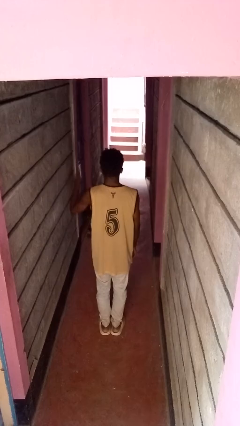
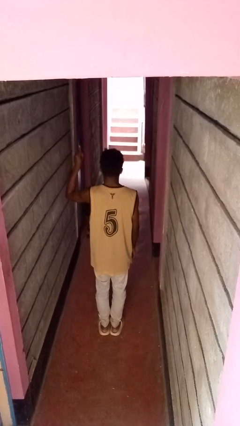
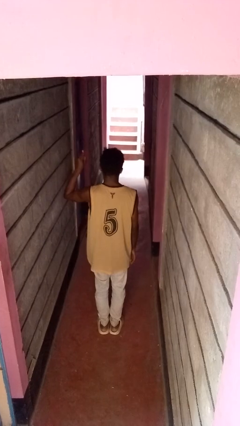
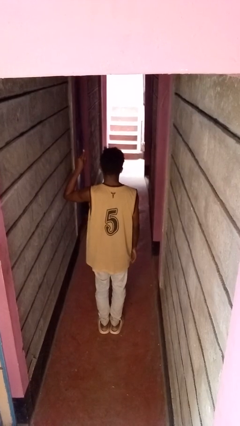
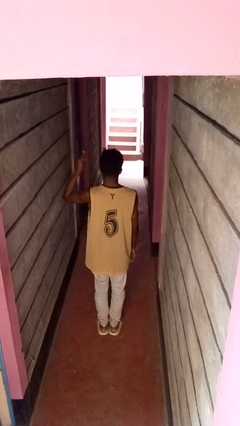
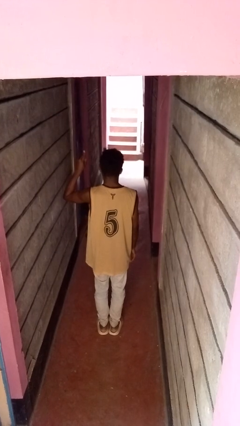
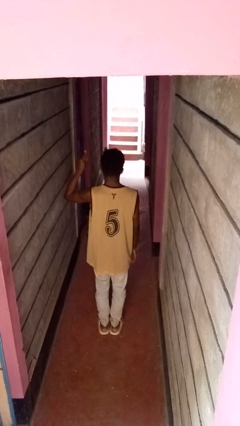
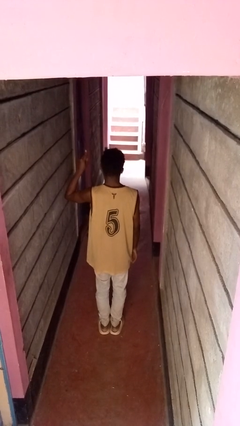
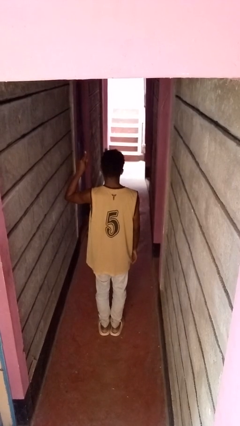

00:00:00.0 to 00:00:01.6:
person gestures number one

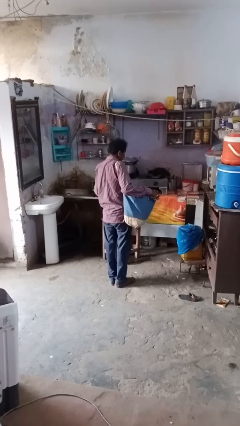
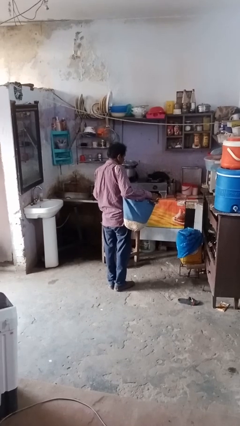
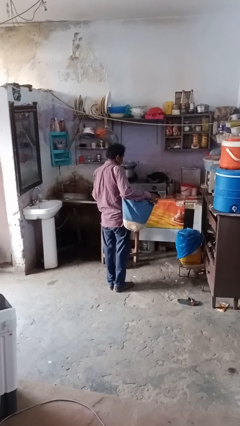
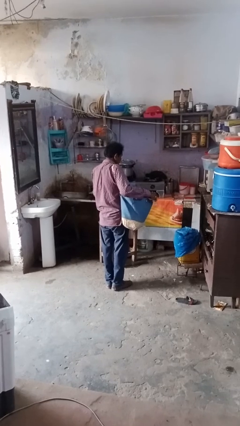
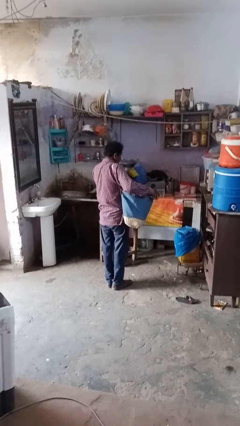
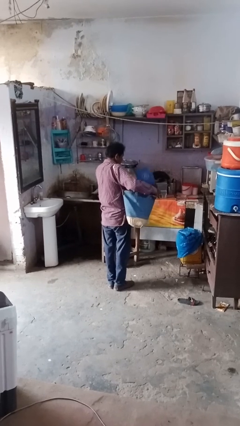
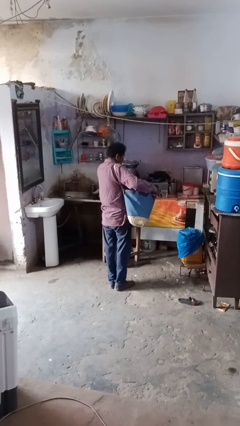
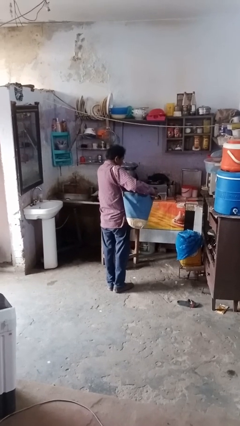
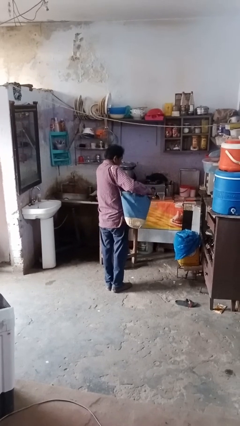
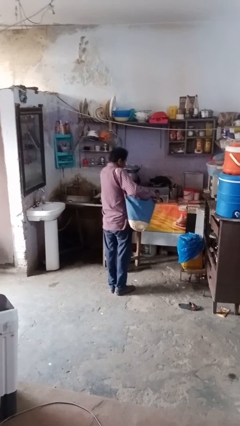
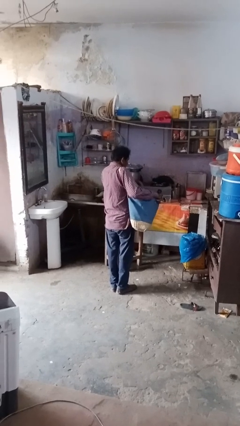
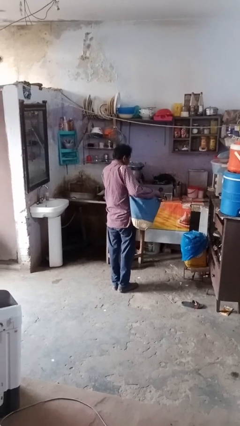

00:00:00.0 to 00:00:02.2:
person puts object into bag

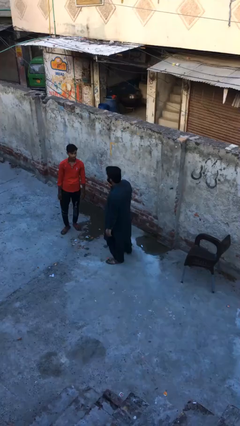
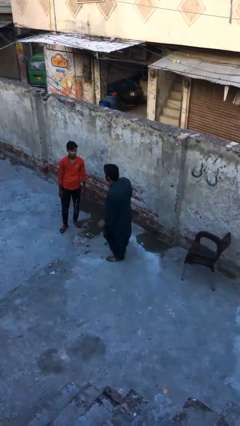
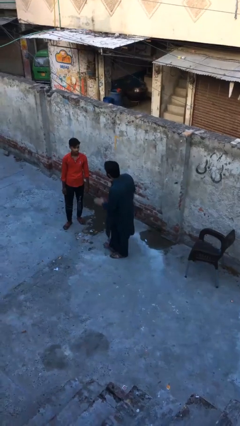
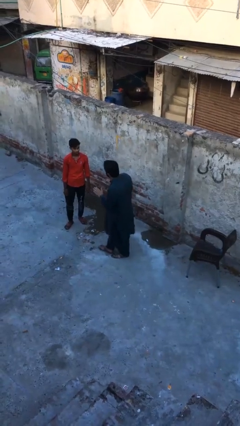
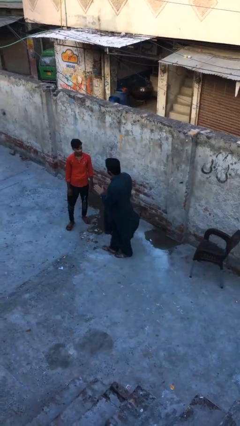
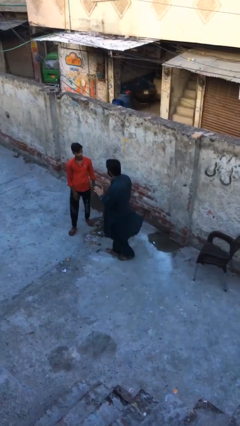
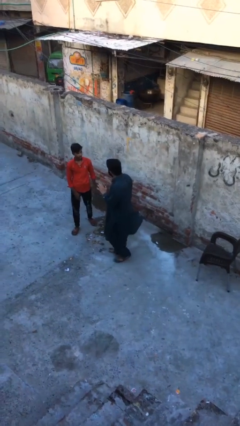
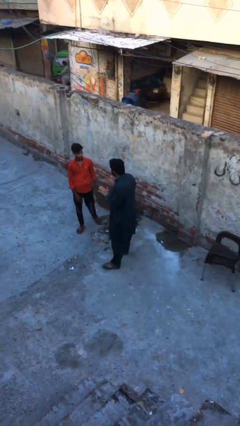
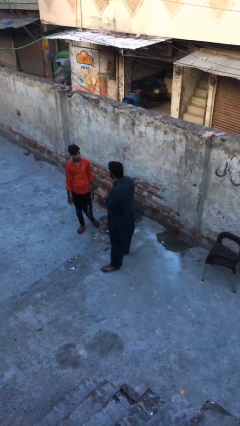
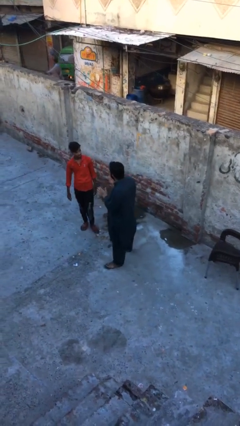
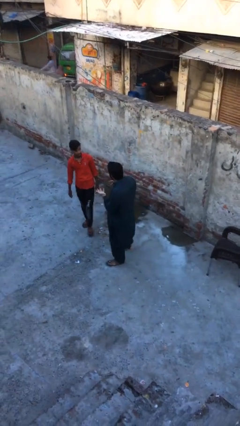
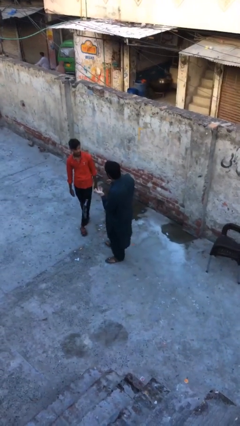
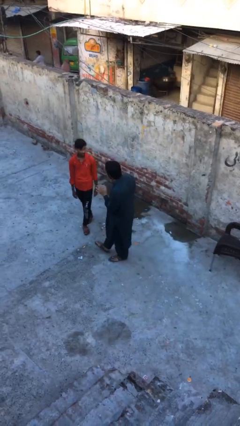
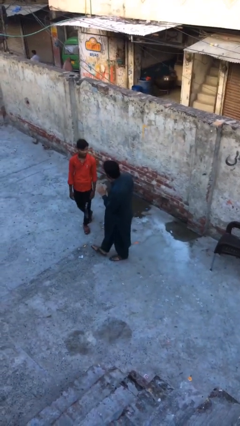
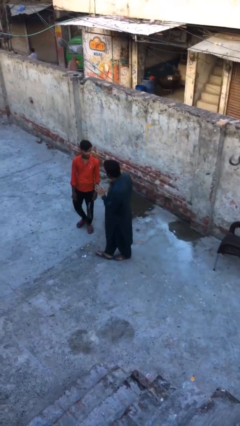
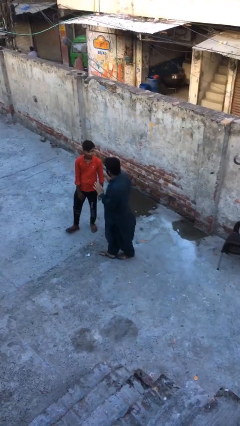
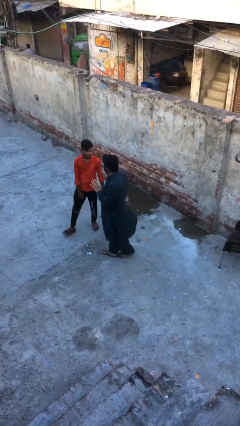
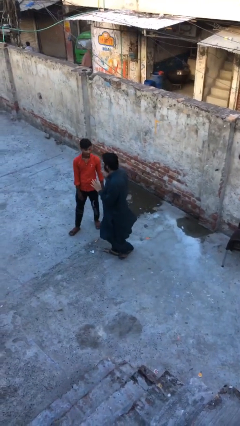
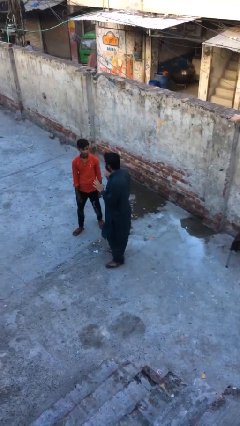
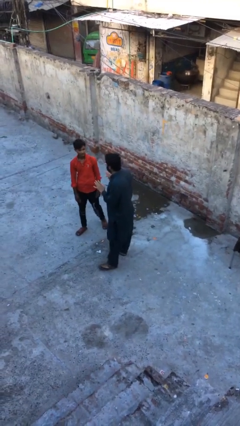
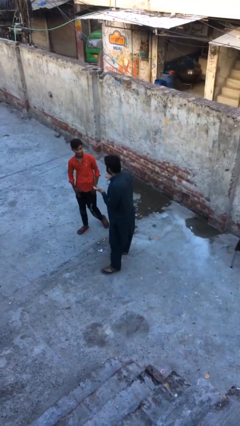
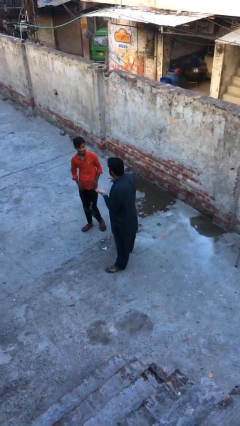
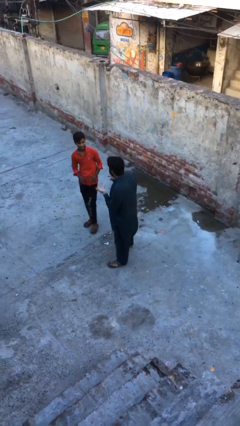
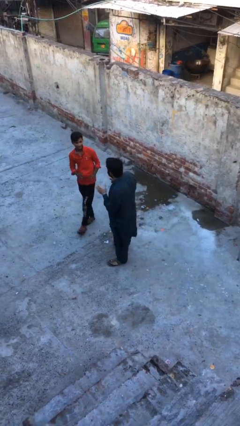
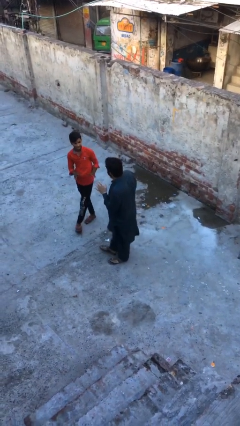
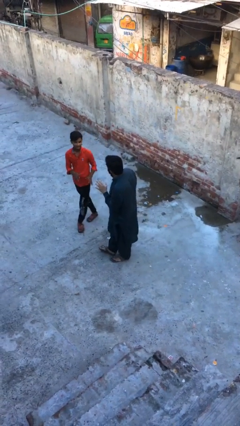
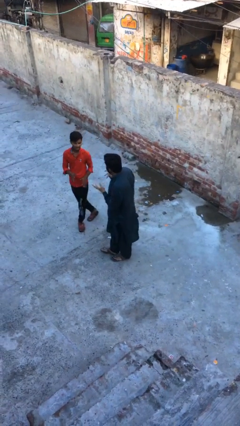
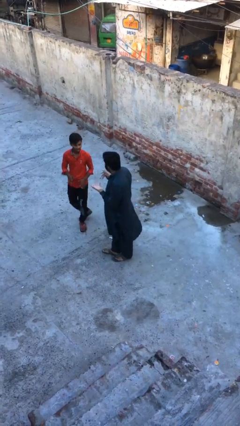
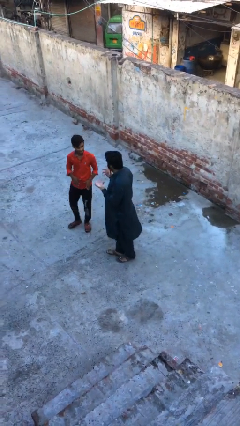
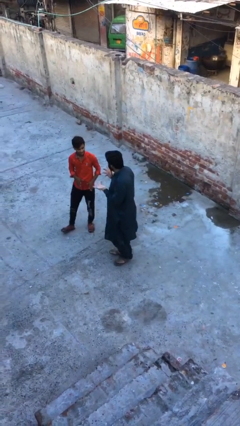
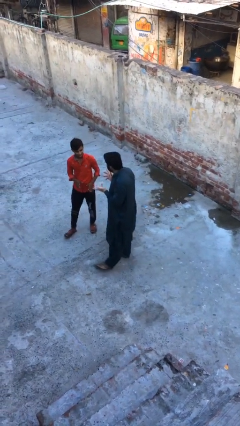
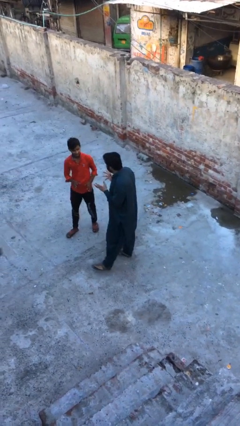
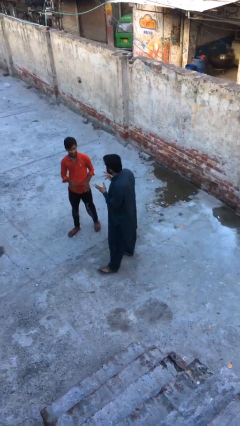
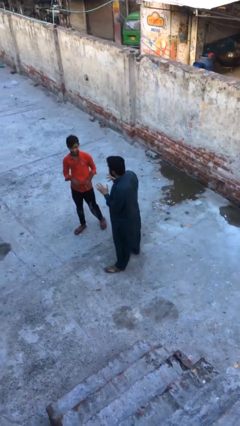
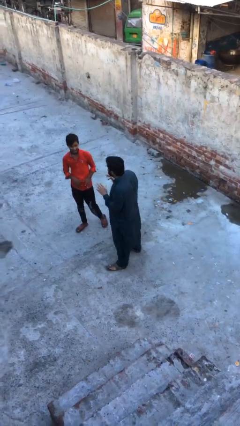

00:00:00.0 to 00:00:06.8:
person talks to person

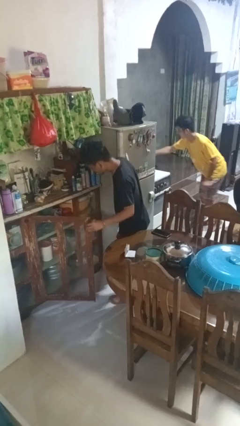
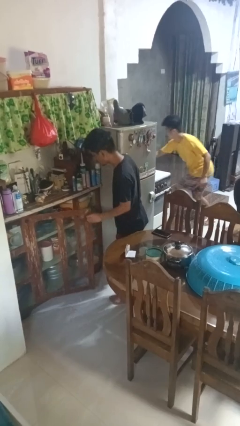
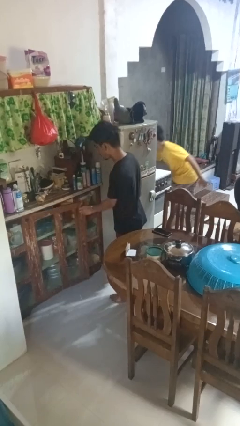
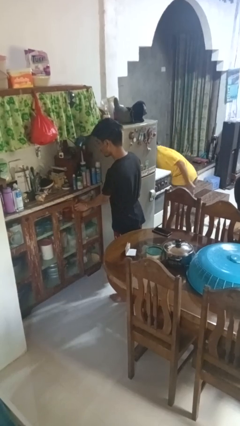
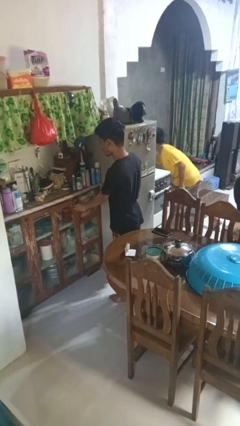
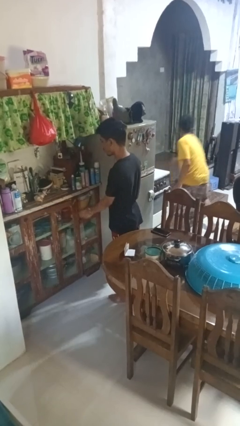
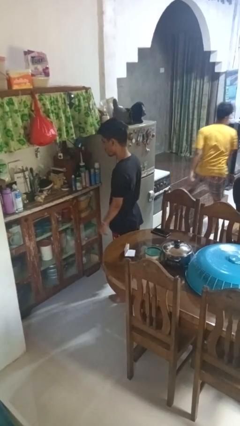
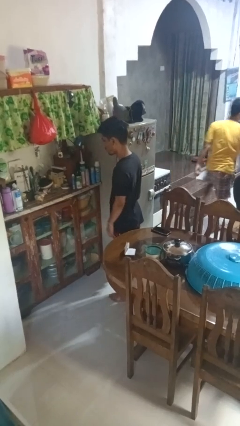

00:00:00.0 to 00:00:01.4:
person closes cabinet

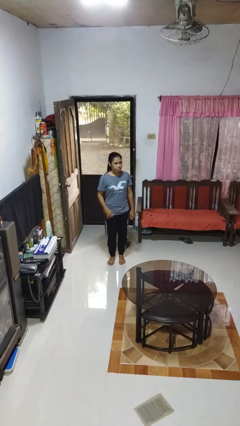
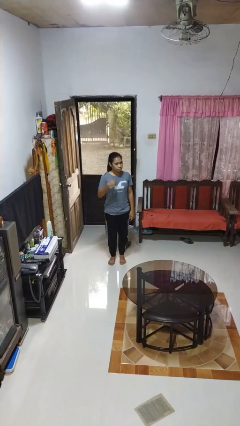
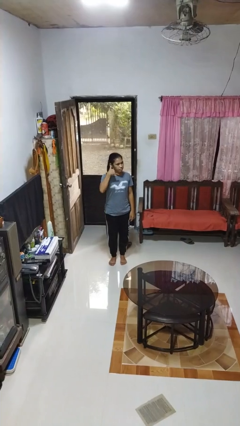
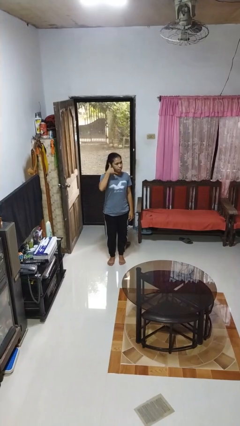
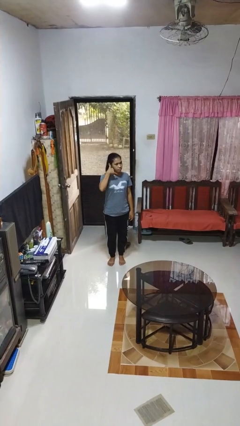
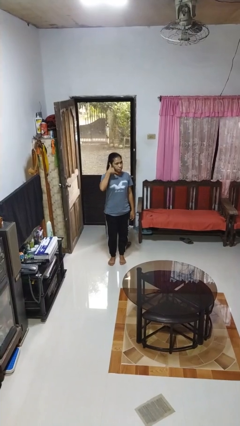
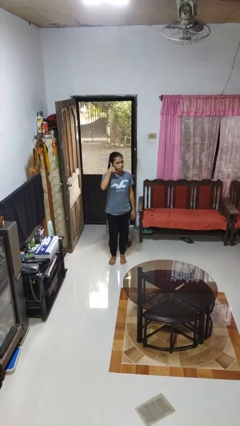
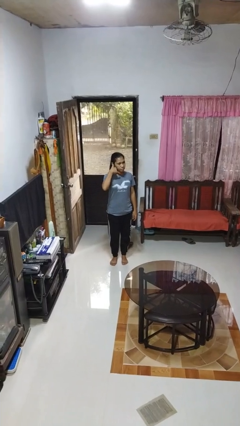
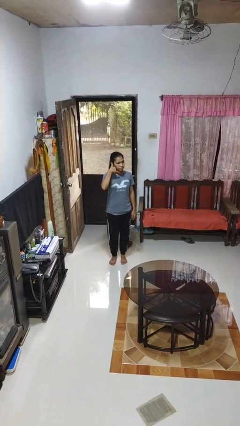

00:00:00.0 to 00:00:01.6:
person gestures call me

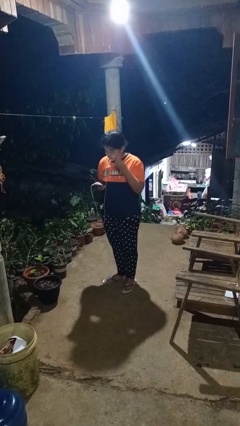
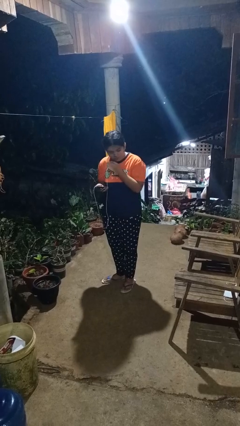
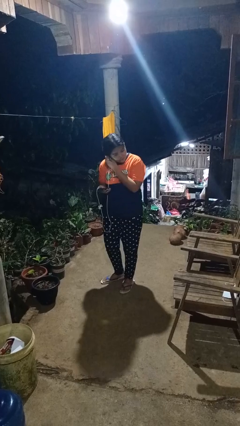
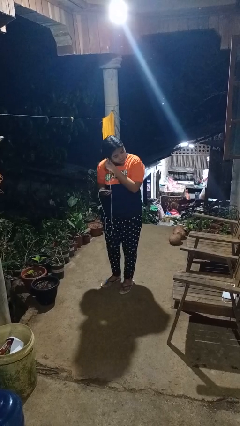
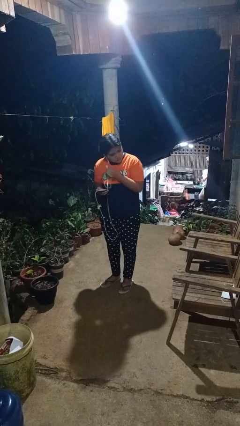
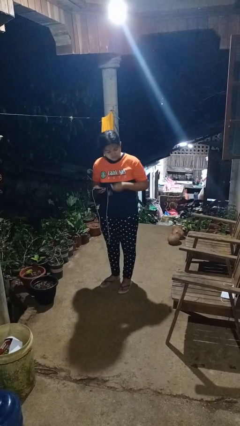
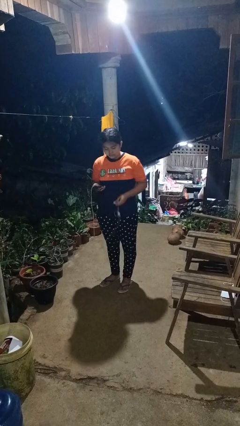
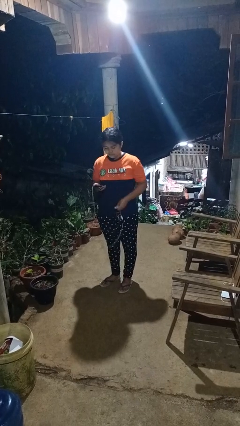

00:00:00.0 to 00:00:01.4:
person takes off headphones

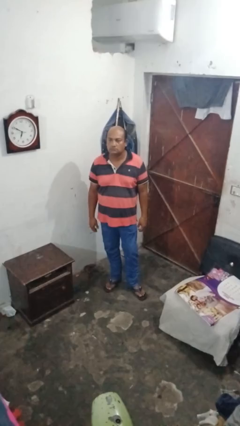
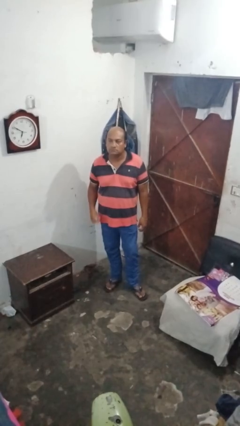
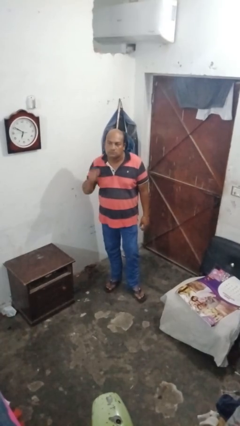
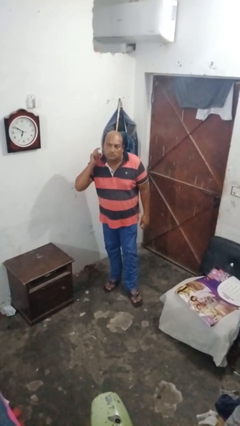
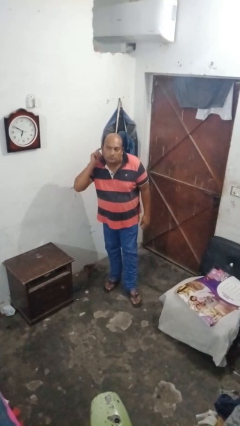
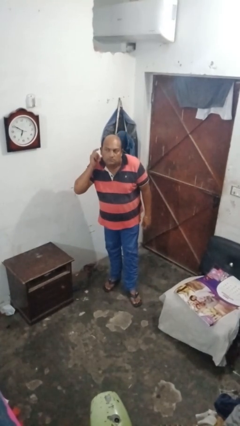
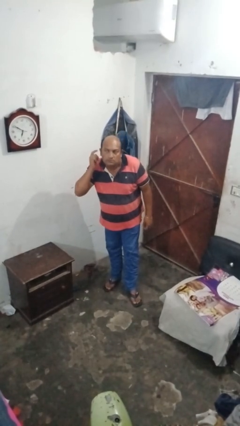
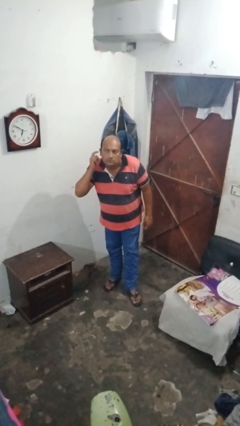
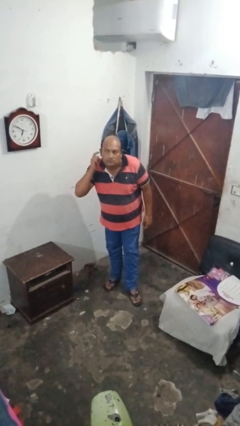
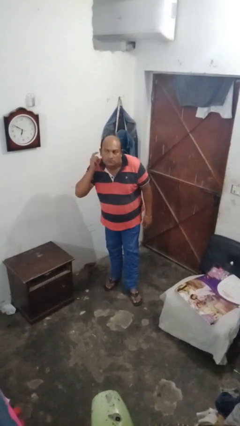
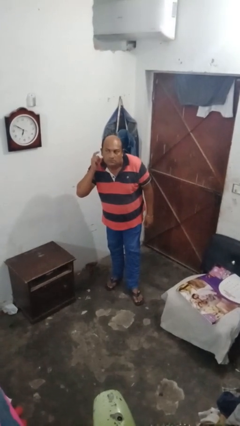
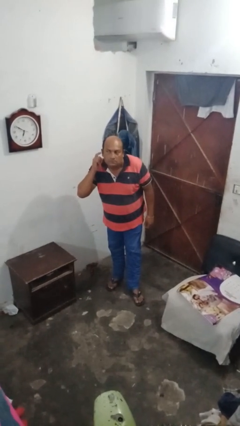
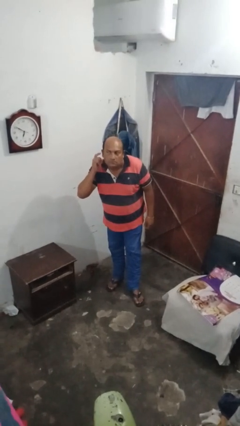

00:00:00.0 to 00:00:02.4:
person gestures be quiet
